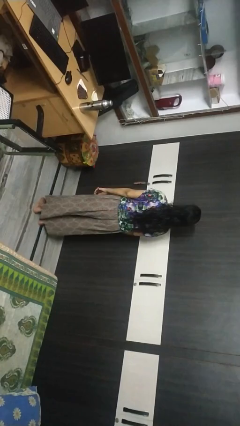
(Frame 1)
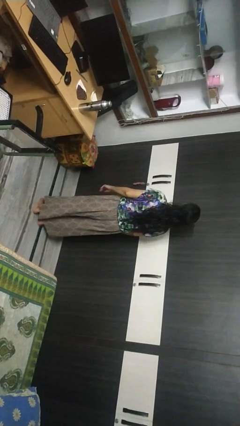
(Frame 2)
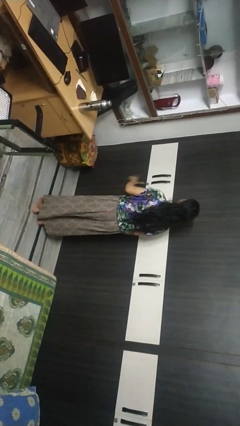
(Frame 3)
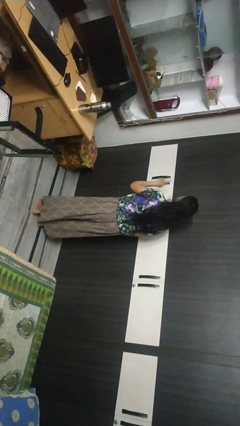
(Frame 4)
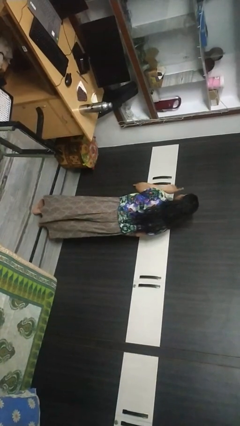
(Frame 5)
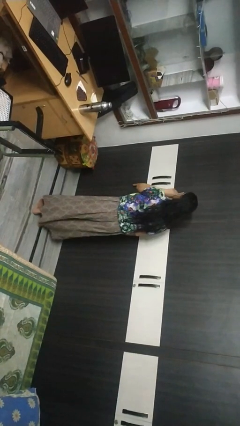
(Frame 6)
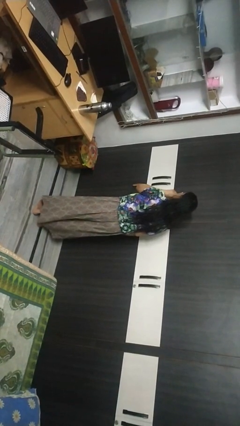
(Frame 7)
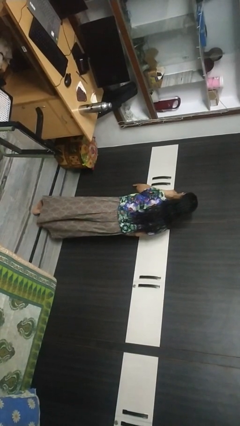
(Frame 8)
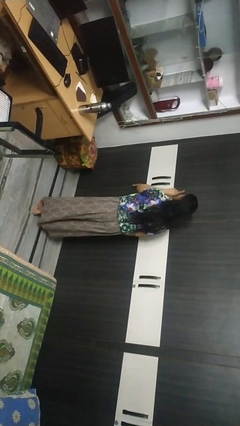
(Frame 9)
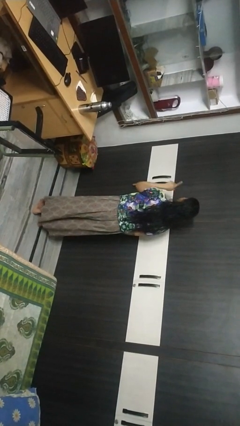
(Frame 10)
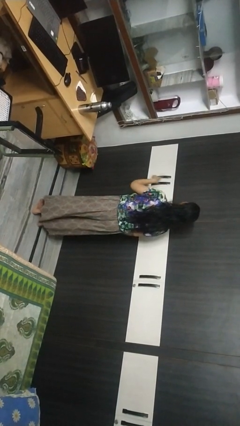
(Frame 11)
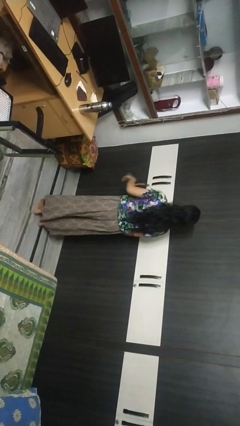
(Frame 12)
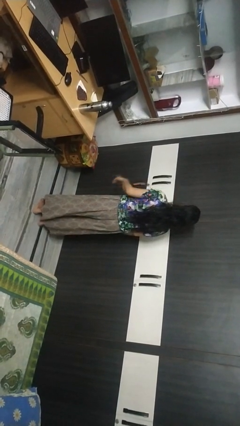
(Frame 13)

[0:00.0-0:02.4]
person gestures be quiet

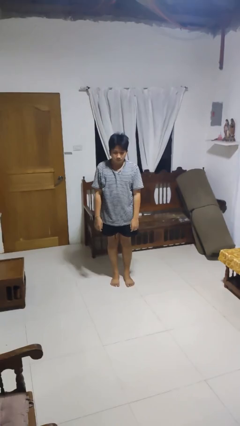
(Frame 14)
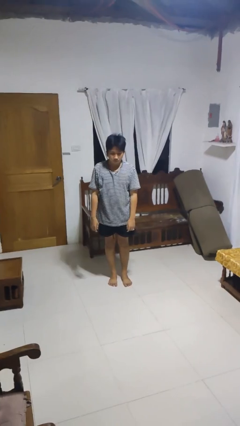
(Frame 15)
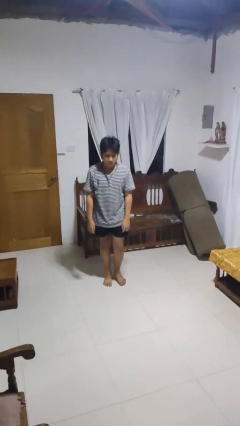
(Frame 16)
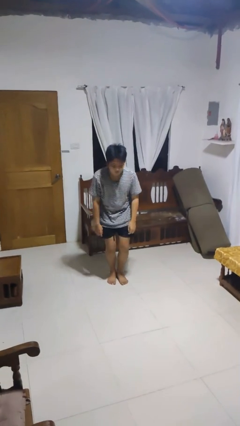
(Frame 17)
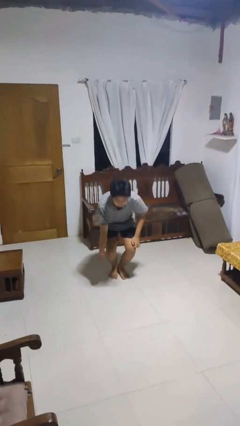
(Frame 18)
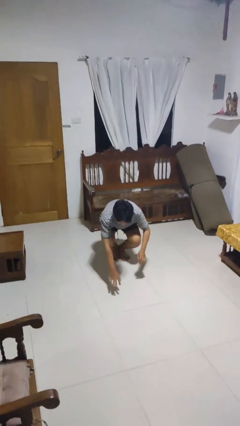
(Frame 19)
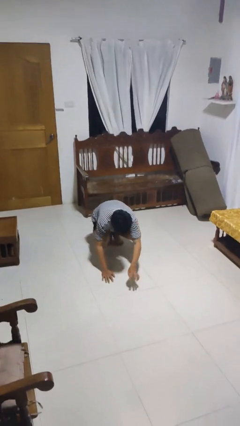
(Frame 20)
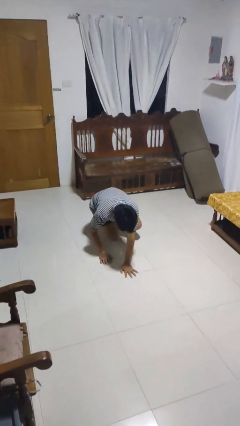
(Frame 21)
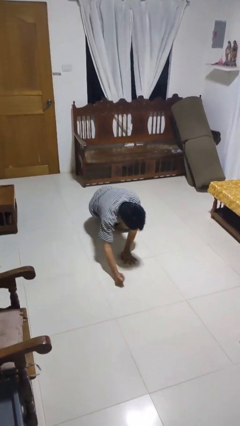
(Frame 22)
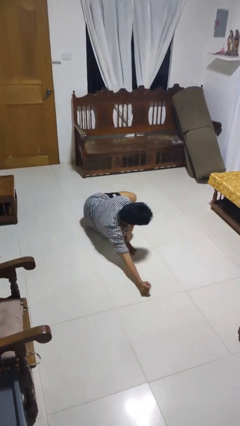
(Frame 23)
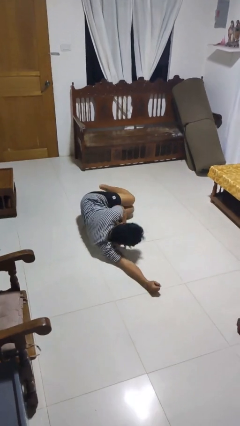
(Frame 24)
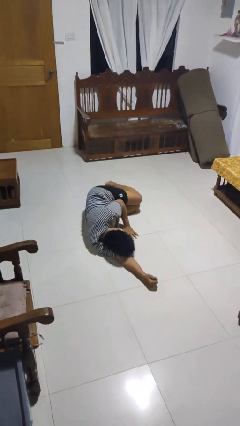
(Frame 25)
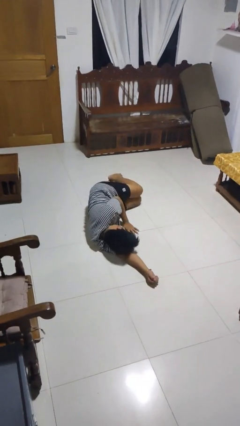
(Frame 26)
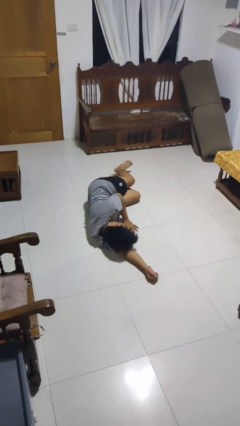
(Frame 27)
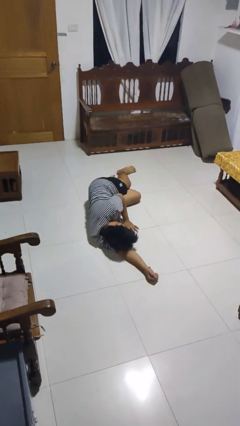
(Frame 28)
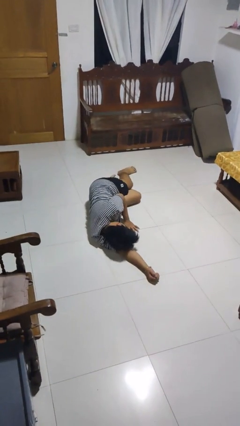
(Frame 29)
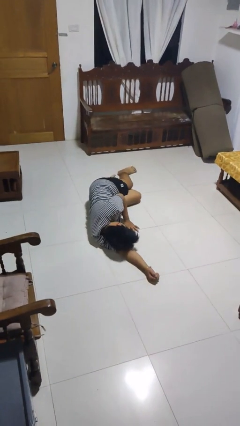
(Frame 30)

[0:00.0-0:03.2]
person falls while standing

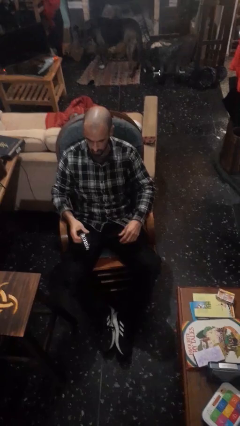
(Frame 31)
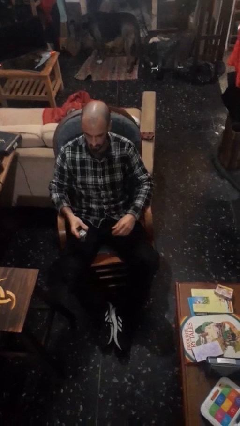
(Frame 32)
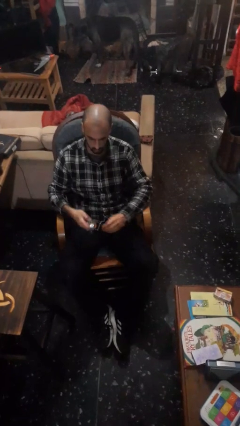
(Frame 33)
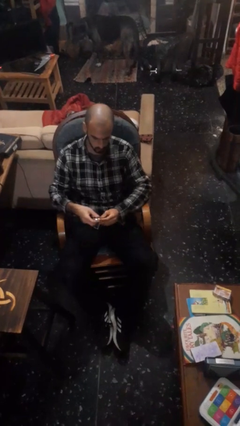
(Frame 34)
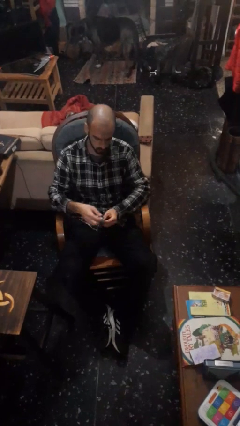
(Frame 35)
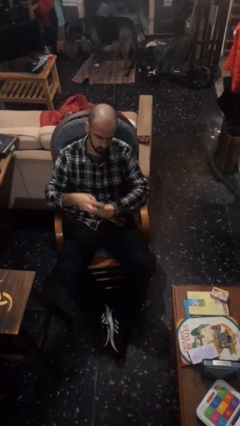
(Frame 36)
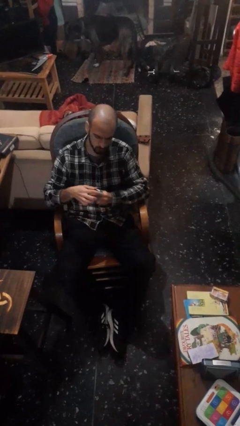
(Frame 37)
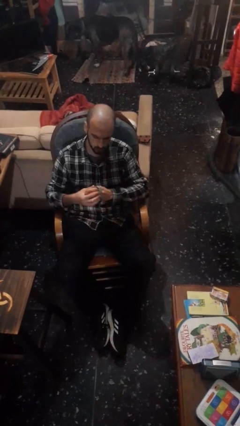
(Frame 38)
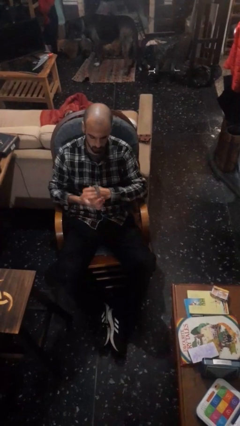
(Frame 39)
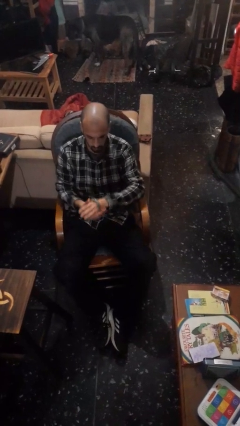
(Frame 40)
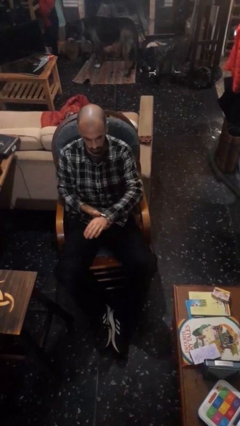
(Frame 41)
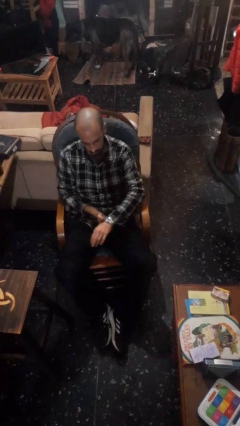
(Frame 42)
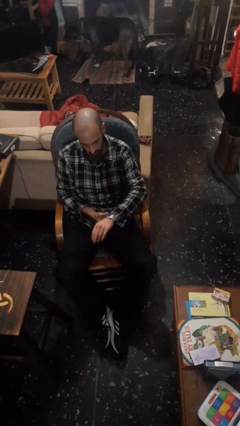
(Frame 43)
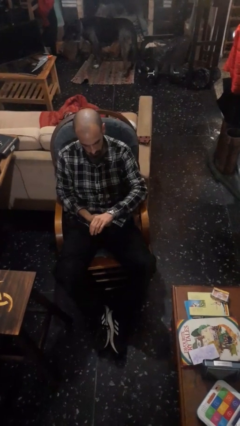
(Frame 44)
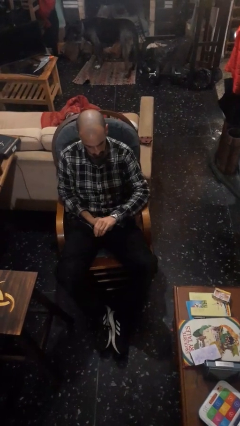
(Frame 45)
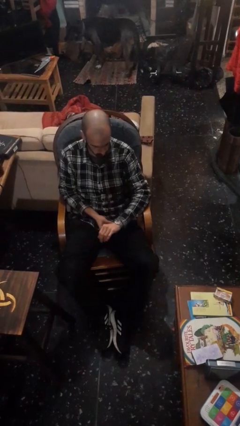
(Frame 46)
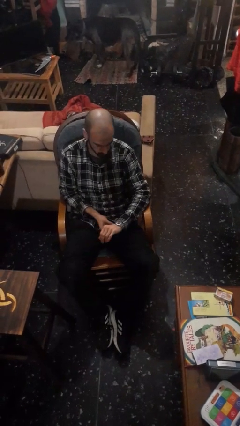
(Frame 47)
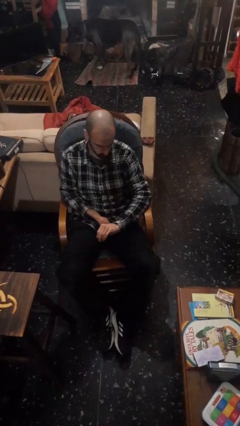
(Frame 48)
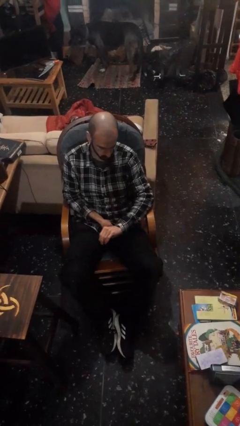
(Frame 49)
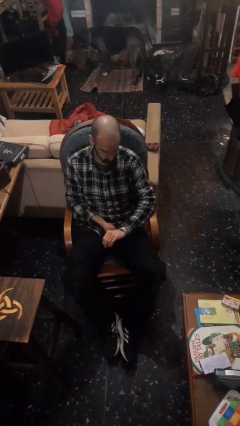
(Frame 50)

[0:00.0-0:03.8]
person puts on wristwatch

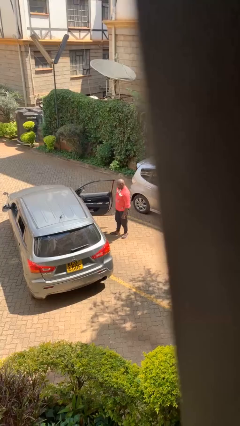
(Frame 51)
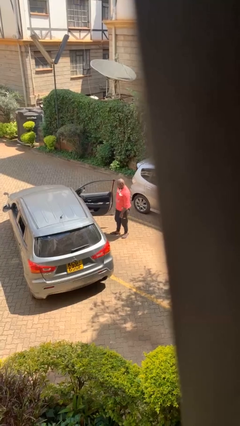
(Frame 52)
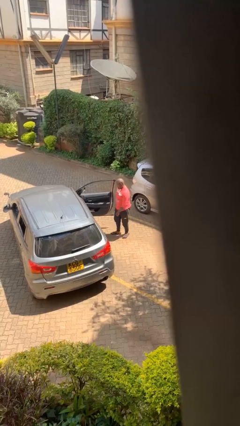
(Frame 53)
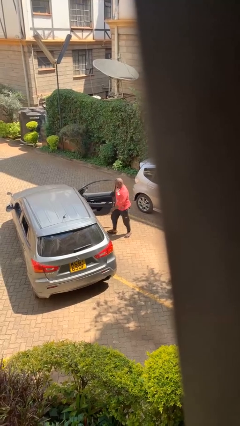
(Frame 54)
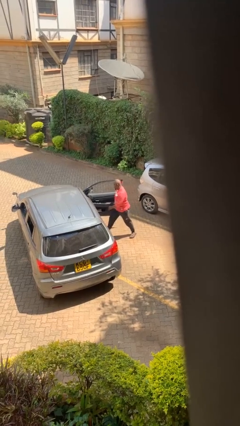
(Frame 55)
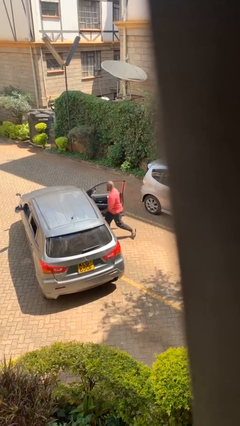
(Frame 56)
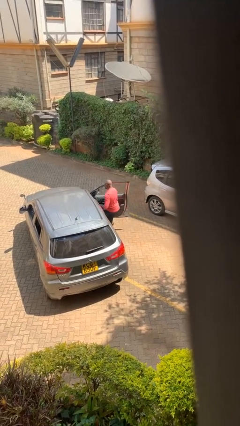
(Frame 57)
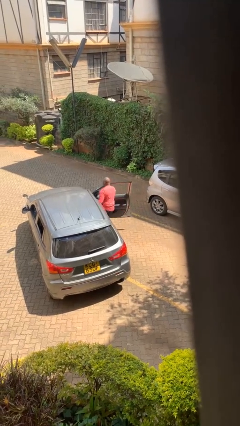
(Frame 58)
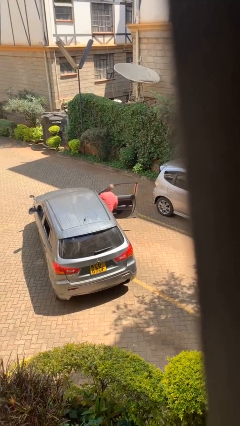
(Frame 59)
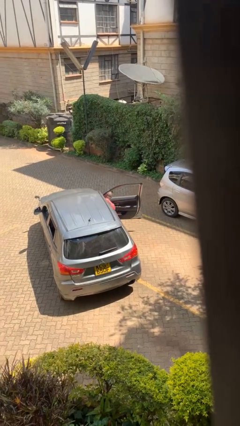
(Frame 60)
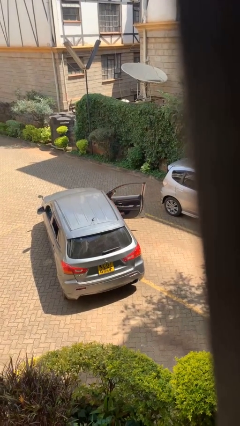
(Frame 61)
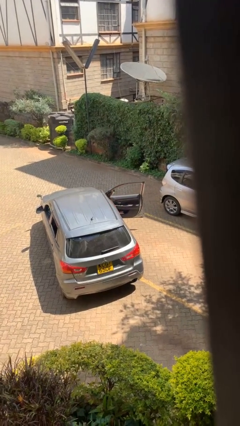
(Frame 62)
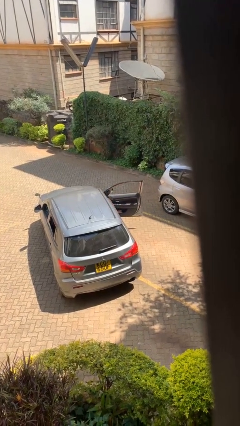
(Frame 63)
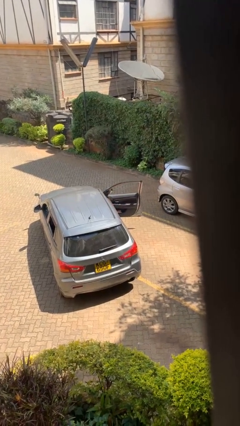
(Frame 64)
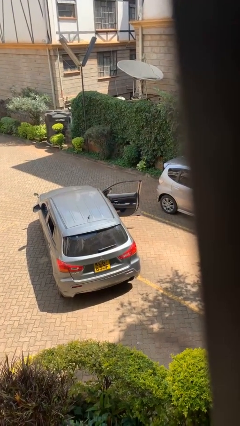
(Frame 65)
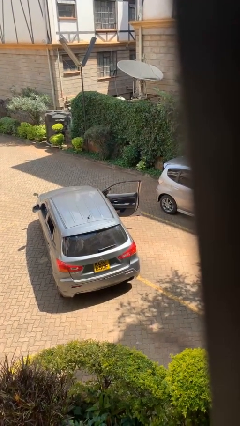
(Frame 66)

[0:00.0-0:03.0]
person enters car

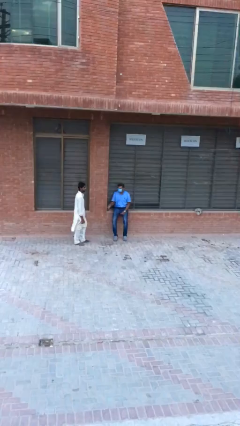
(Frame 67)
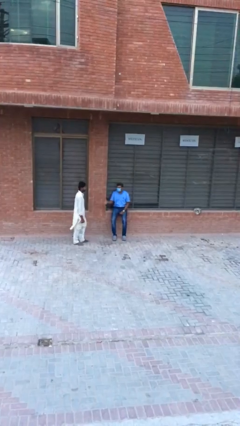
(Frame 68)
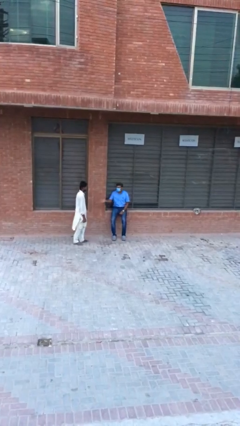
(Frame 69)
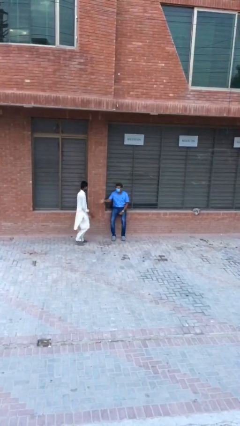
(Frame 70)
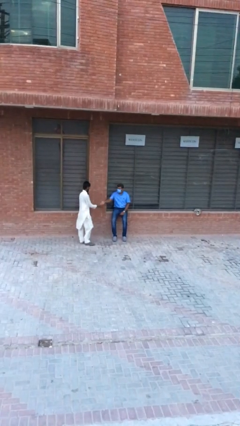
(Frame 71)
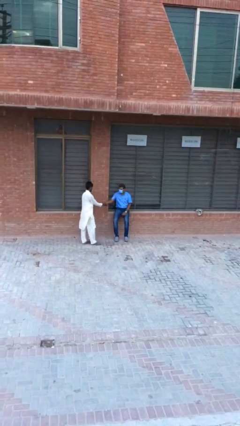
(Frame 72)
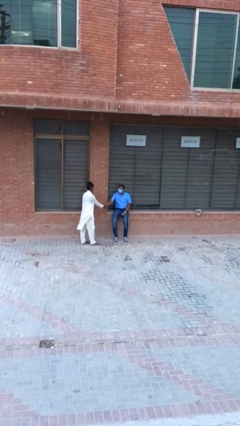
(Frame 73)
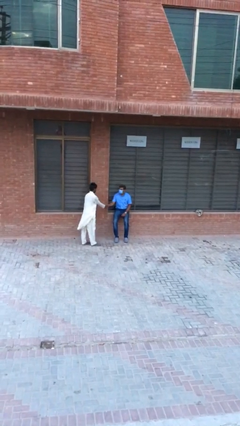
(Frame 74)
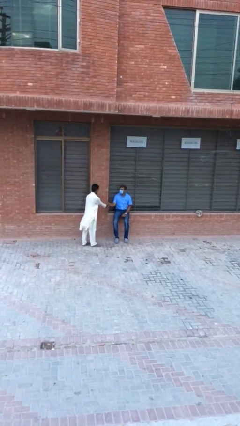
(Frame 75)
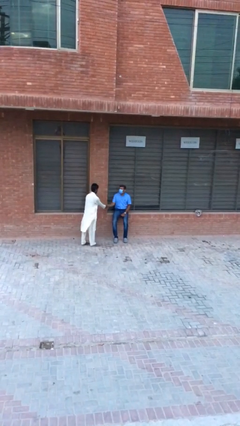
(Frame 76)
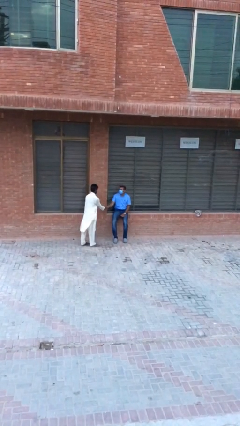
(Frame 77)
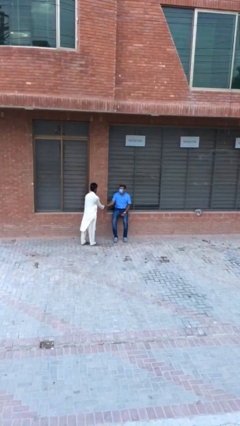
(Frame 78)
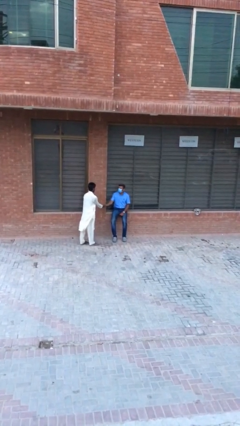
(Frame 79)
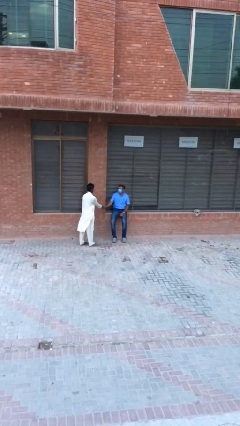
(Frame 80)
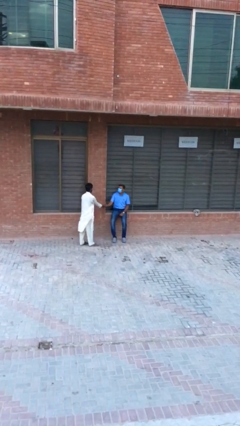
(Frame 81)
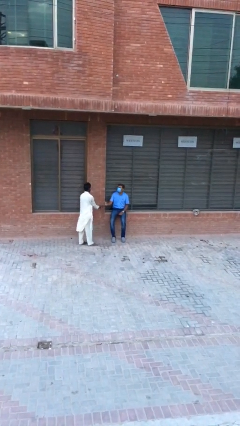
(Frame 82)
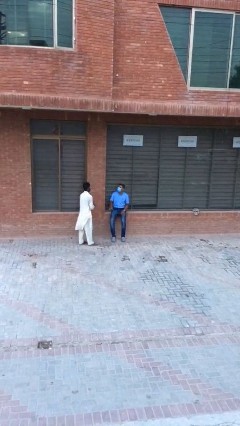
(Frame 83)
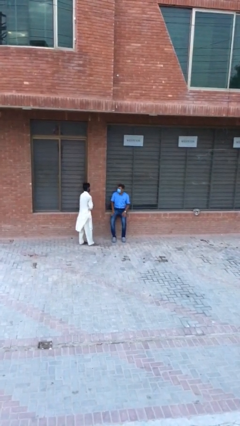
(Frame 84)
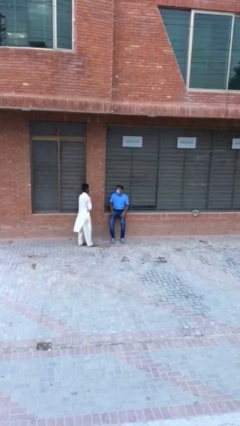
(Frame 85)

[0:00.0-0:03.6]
person shakes hand

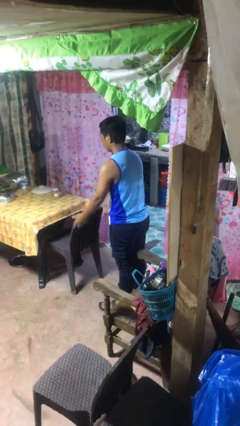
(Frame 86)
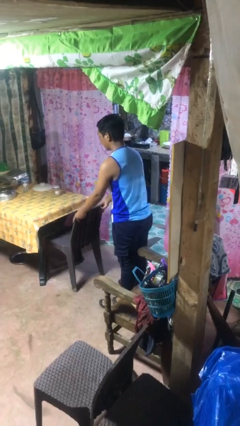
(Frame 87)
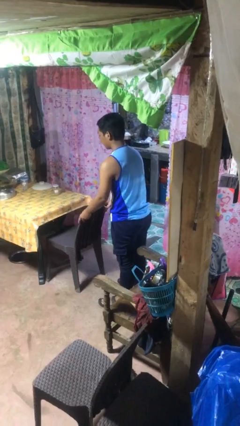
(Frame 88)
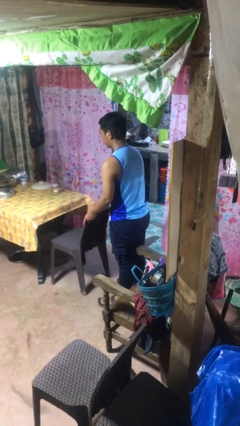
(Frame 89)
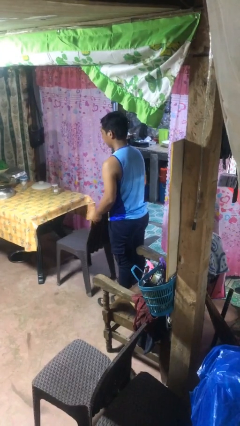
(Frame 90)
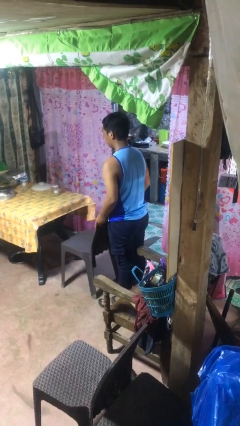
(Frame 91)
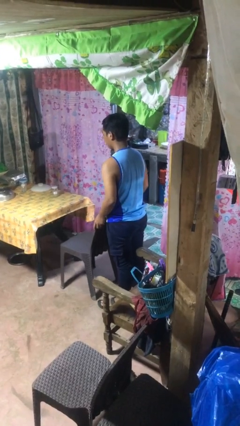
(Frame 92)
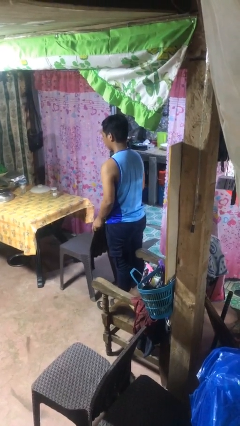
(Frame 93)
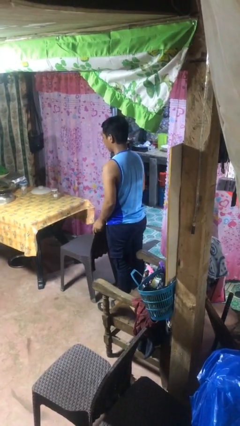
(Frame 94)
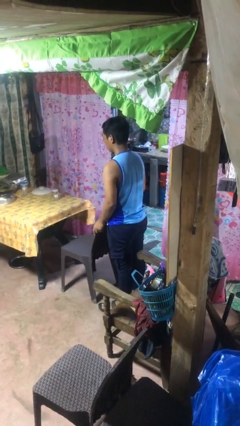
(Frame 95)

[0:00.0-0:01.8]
person pulls out chair
